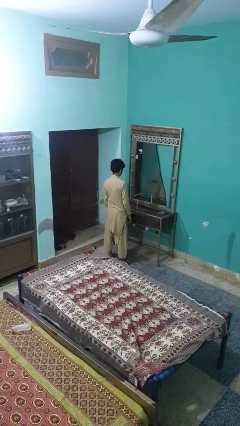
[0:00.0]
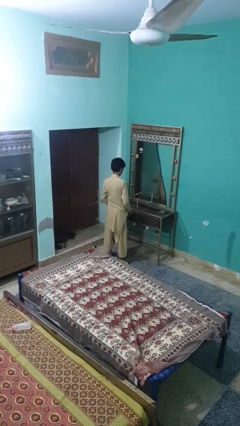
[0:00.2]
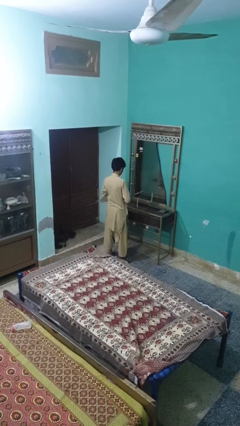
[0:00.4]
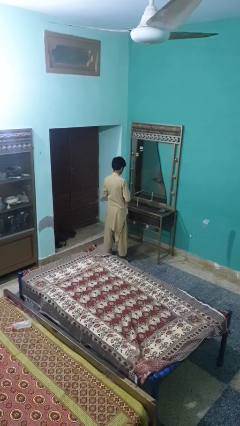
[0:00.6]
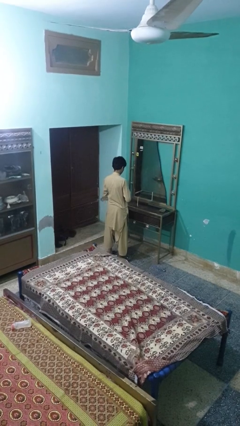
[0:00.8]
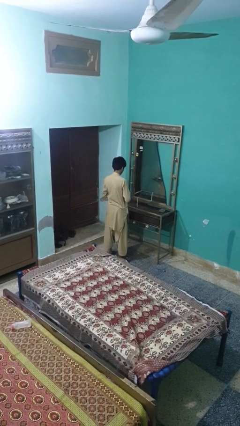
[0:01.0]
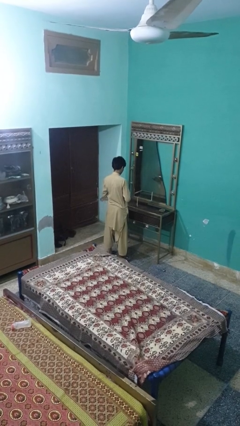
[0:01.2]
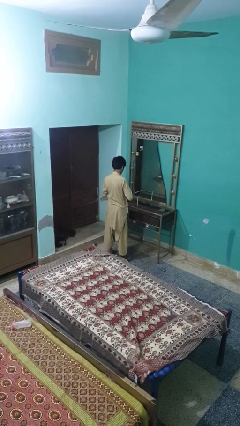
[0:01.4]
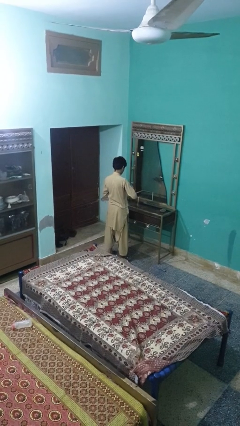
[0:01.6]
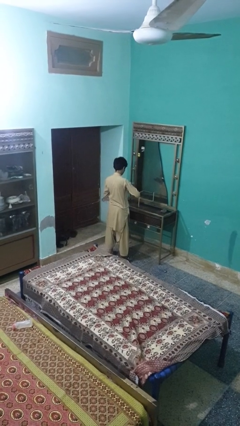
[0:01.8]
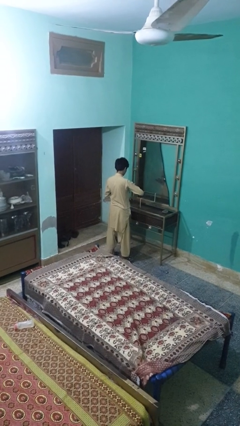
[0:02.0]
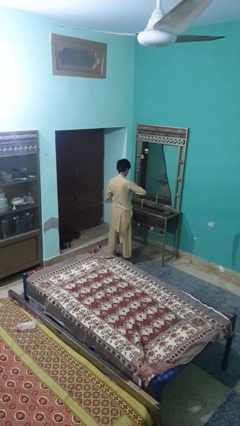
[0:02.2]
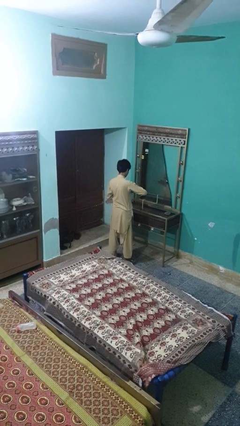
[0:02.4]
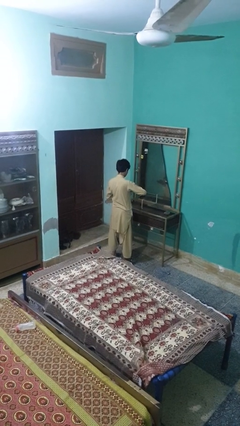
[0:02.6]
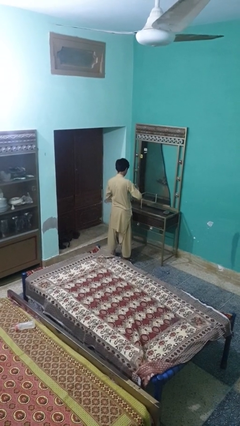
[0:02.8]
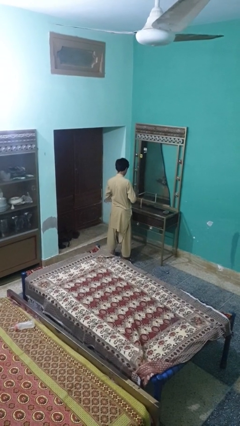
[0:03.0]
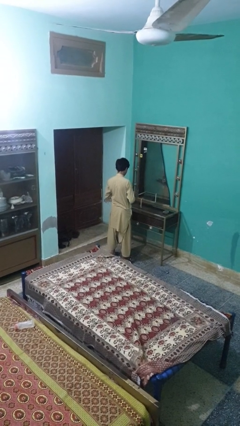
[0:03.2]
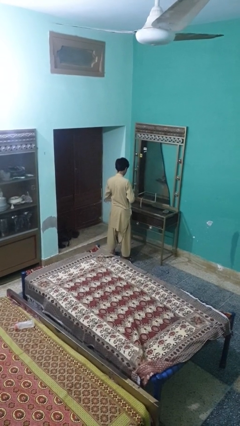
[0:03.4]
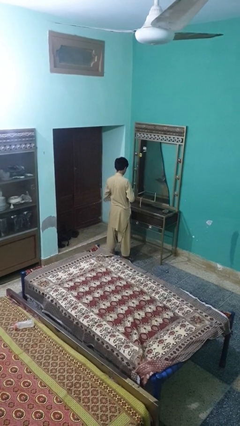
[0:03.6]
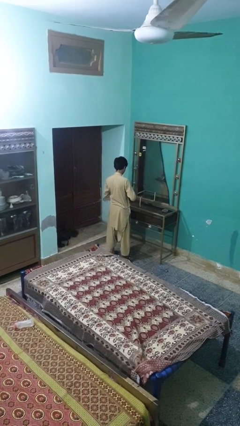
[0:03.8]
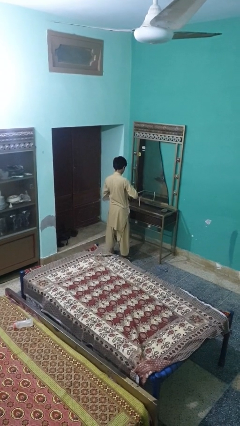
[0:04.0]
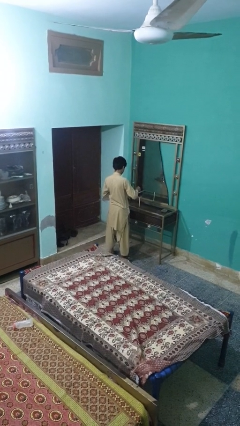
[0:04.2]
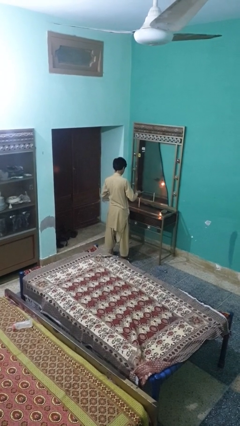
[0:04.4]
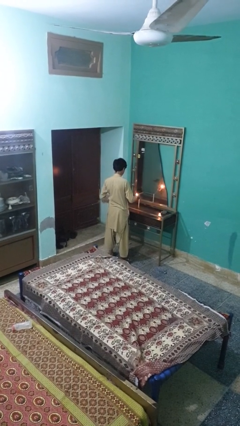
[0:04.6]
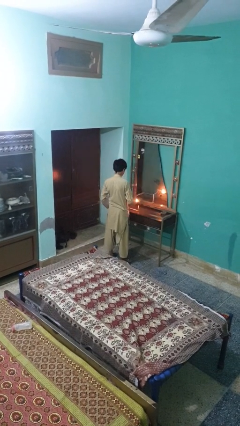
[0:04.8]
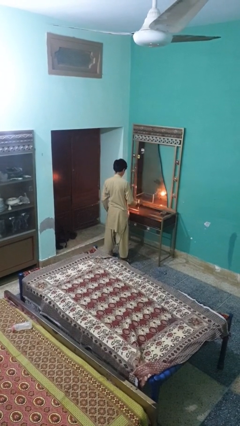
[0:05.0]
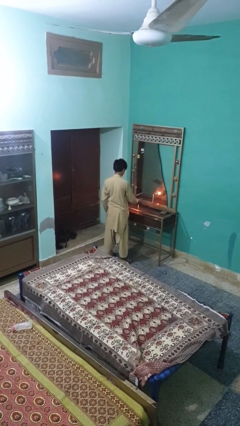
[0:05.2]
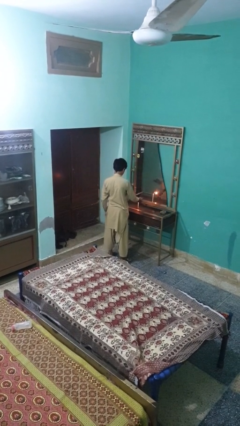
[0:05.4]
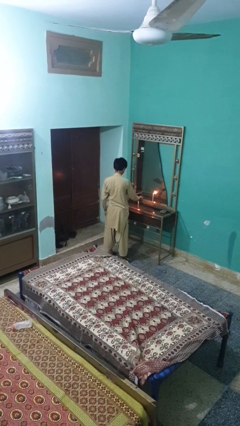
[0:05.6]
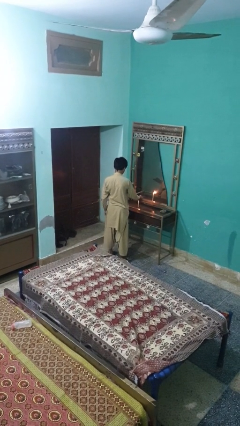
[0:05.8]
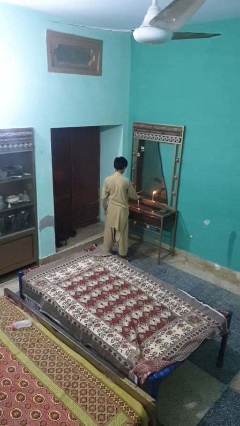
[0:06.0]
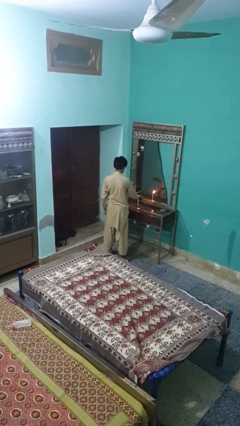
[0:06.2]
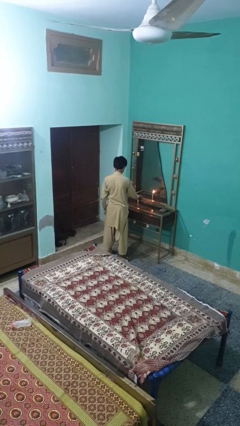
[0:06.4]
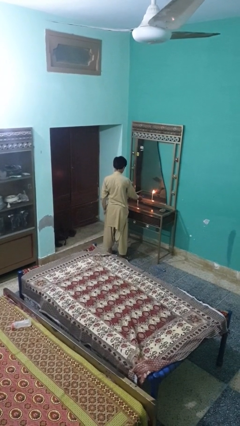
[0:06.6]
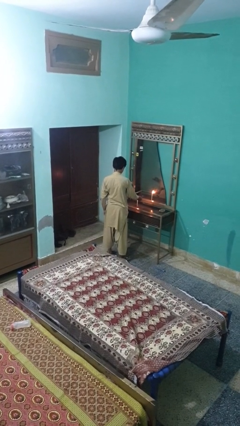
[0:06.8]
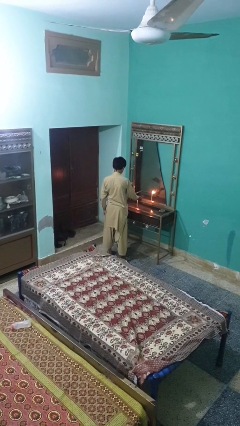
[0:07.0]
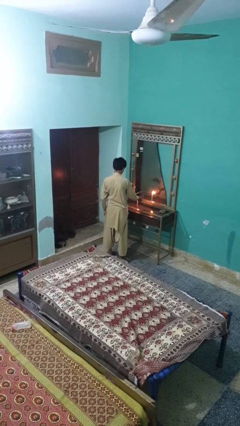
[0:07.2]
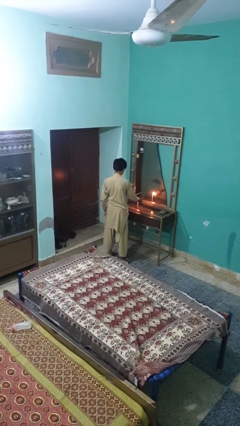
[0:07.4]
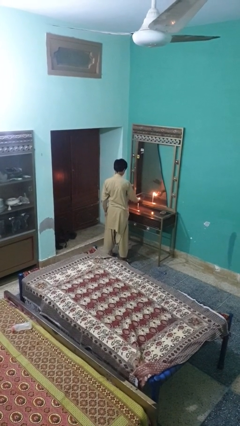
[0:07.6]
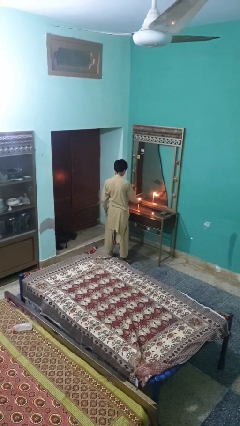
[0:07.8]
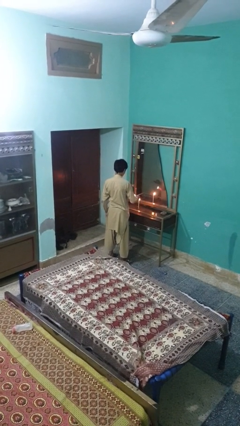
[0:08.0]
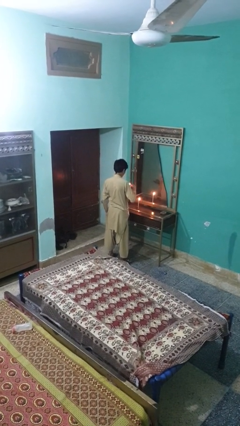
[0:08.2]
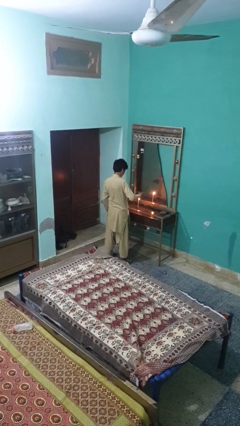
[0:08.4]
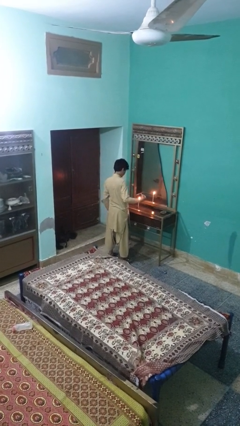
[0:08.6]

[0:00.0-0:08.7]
person lights candle

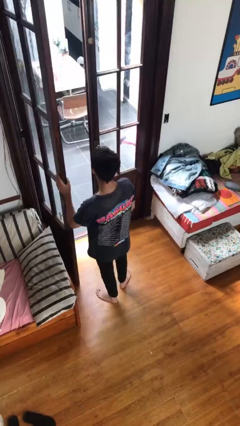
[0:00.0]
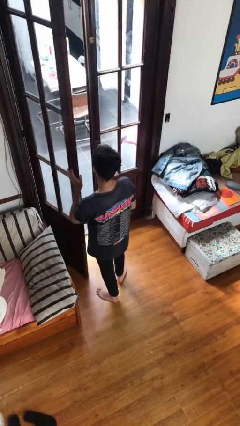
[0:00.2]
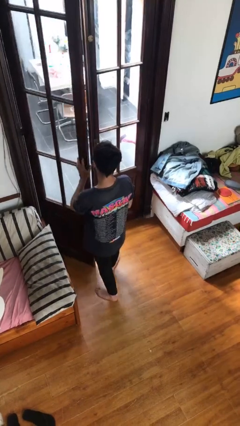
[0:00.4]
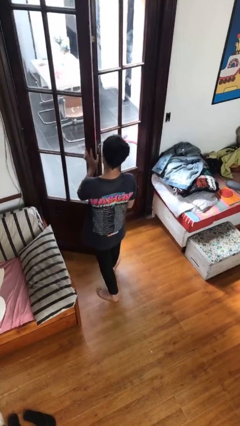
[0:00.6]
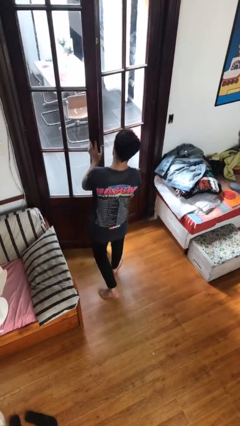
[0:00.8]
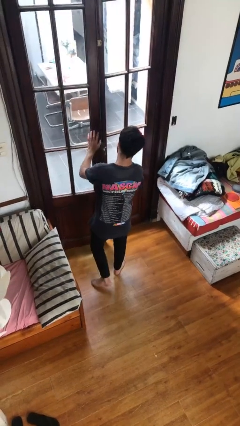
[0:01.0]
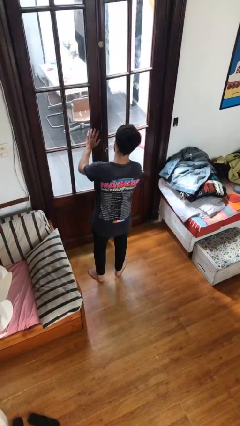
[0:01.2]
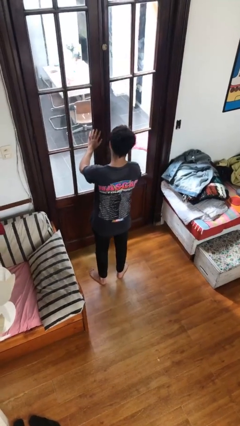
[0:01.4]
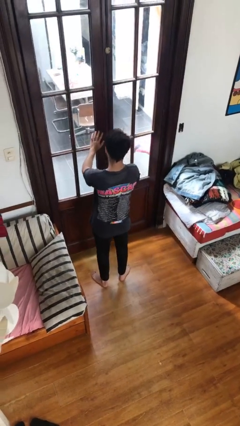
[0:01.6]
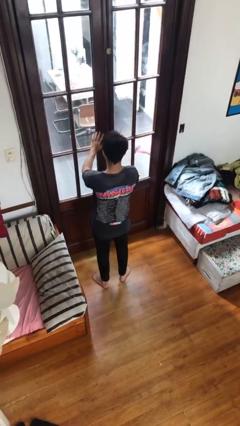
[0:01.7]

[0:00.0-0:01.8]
person closes facility door

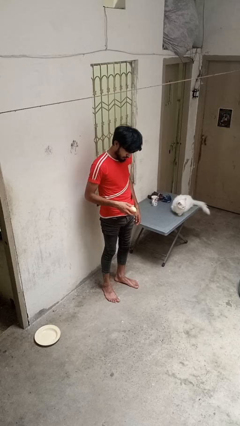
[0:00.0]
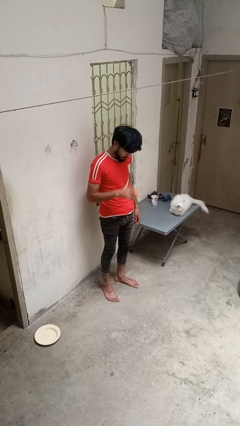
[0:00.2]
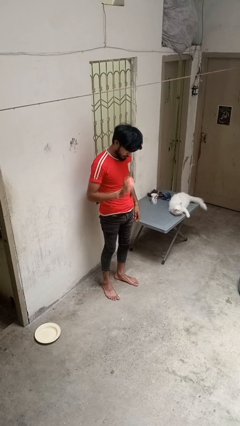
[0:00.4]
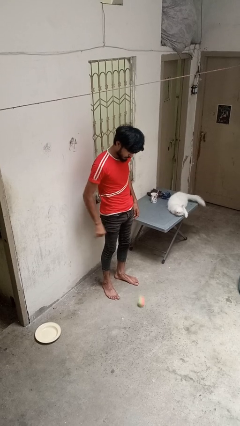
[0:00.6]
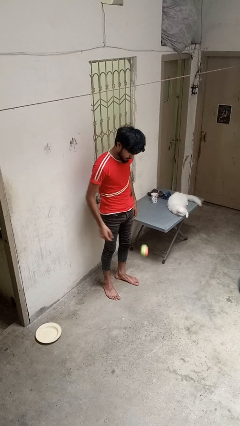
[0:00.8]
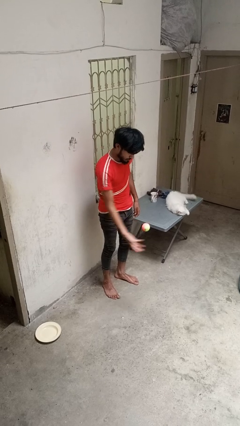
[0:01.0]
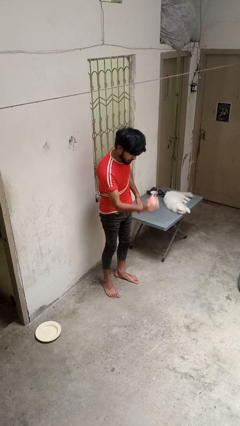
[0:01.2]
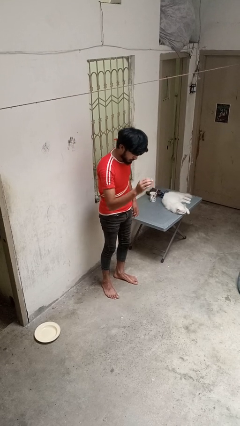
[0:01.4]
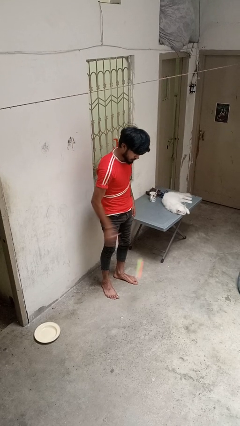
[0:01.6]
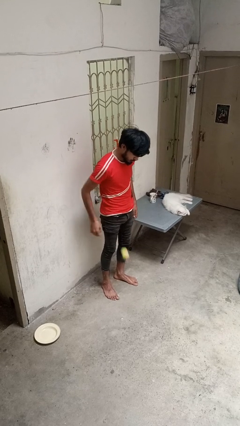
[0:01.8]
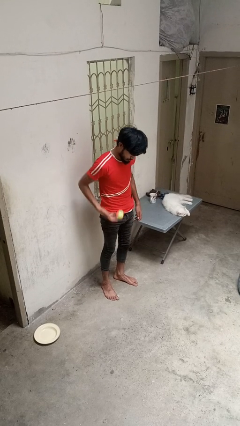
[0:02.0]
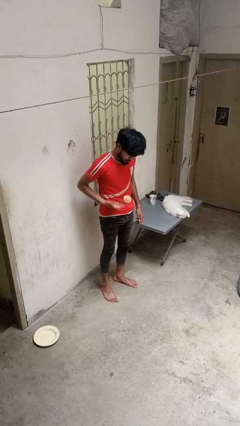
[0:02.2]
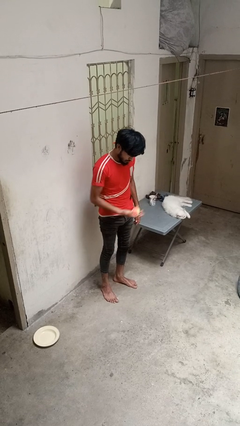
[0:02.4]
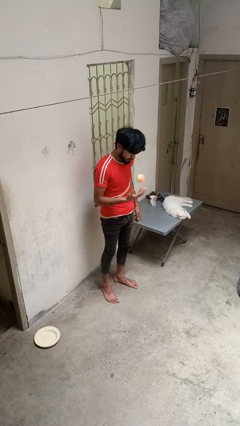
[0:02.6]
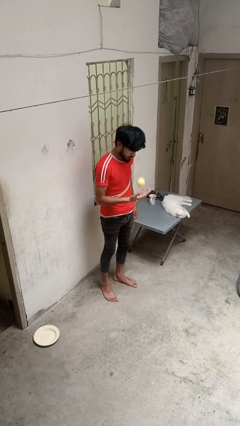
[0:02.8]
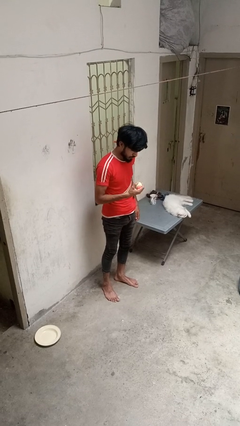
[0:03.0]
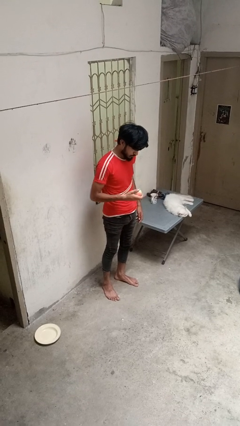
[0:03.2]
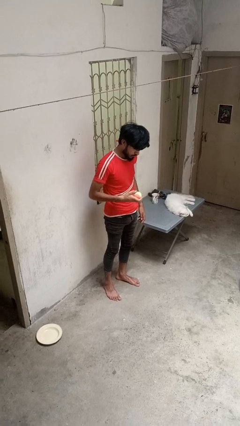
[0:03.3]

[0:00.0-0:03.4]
person bounces ball on floor

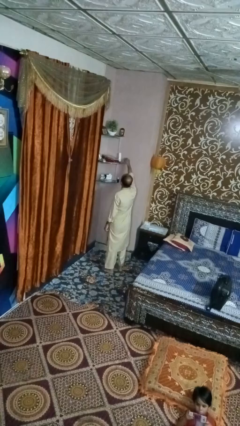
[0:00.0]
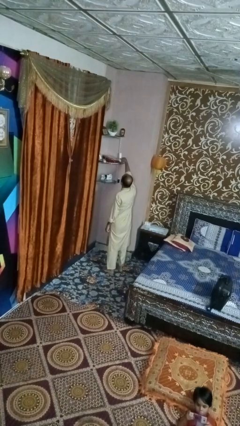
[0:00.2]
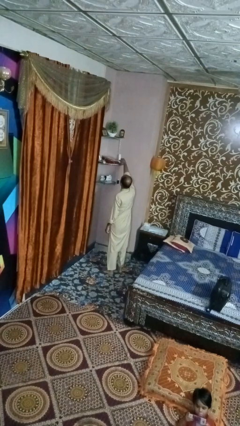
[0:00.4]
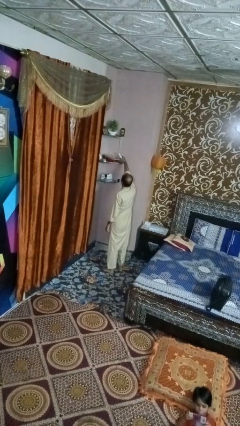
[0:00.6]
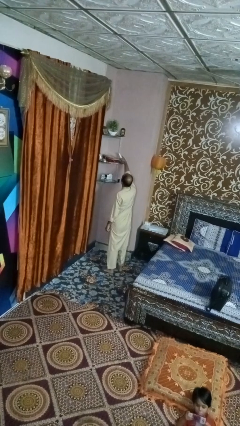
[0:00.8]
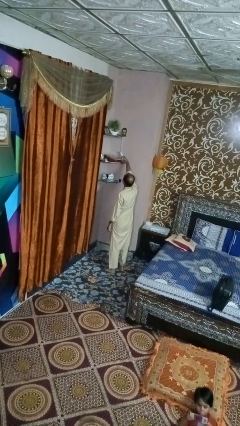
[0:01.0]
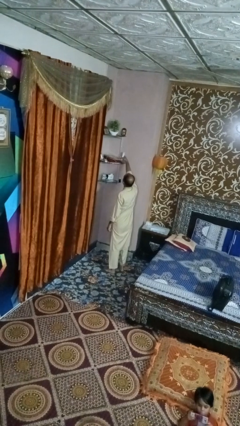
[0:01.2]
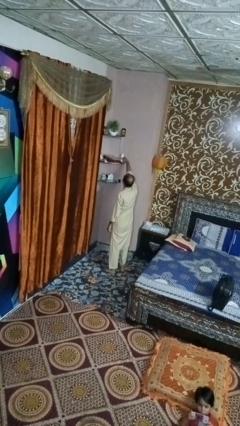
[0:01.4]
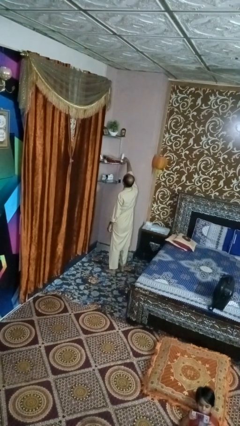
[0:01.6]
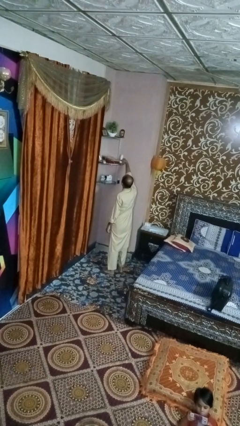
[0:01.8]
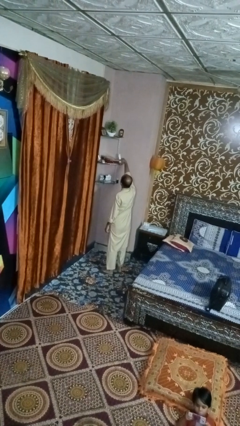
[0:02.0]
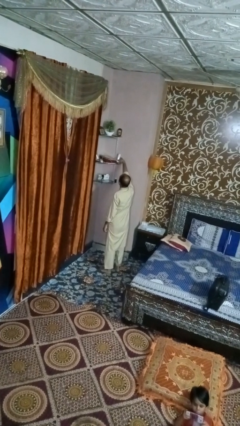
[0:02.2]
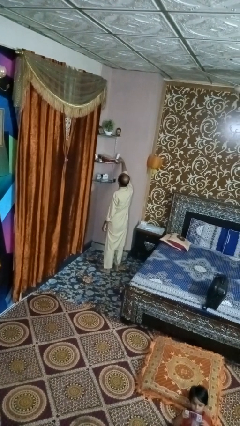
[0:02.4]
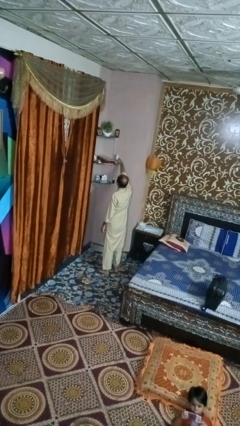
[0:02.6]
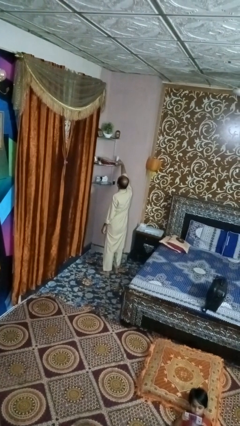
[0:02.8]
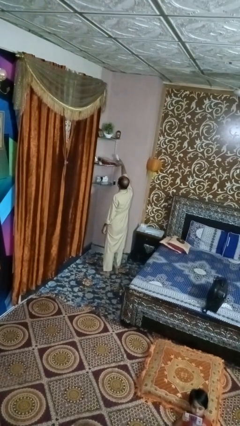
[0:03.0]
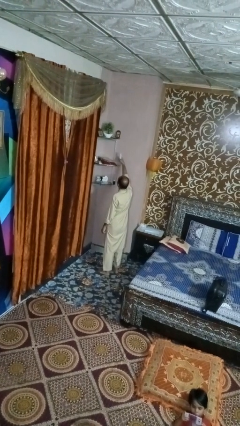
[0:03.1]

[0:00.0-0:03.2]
person picks up object from shelf

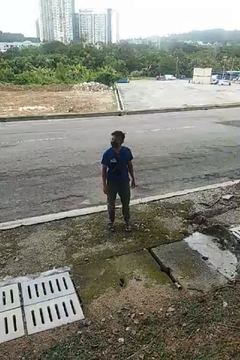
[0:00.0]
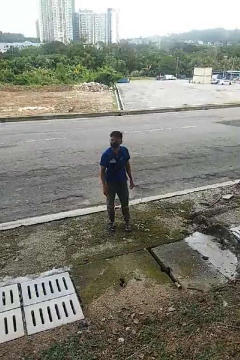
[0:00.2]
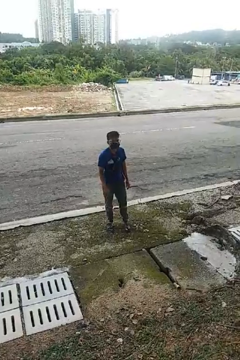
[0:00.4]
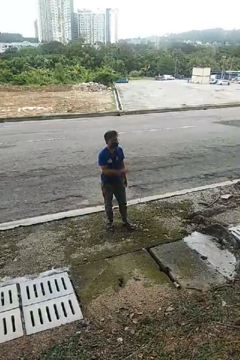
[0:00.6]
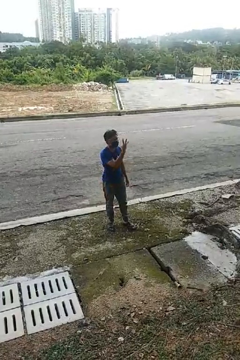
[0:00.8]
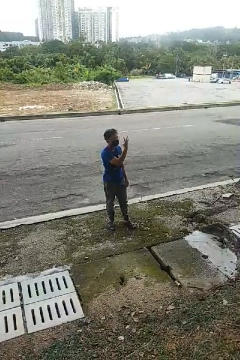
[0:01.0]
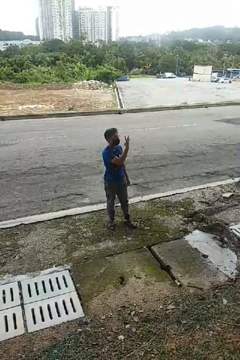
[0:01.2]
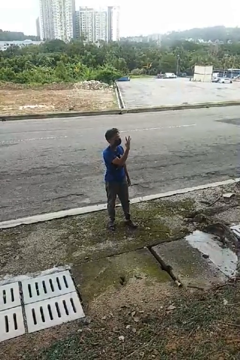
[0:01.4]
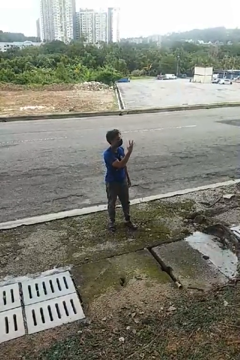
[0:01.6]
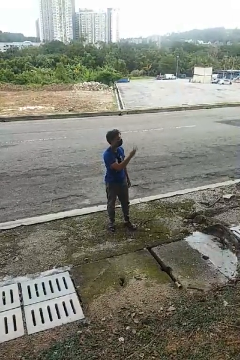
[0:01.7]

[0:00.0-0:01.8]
person gestures number three
